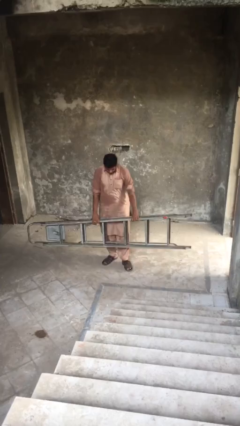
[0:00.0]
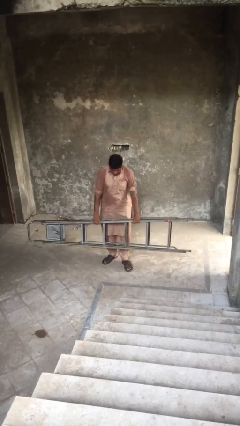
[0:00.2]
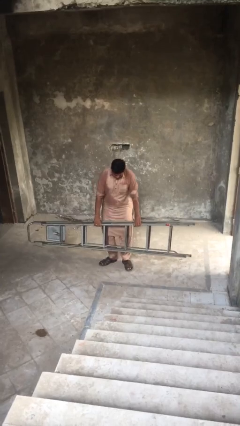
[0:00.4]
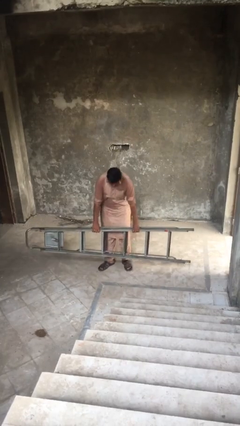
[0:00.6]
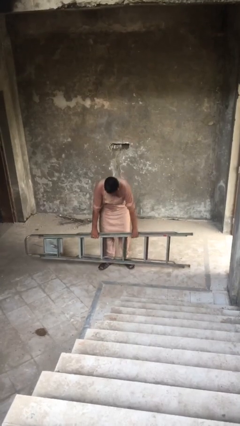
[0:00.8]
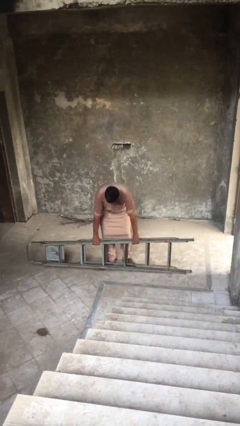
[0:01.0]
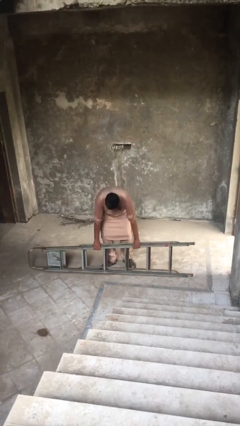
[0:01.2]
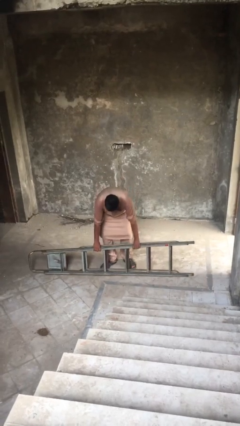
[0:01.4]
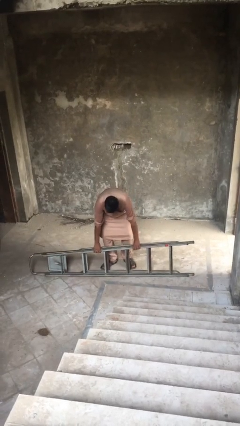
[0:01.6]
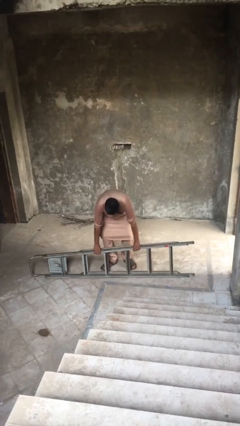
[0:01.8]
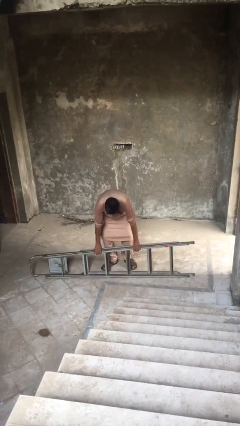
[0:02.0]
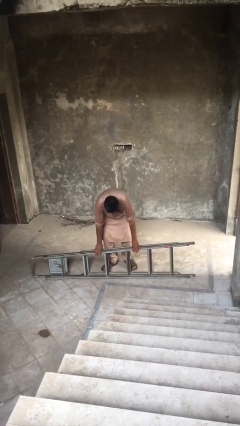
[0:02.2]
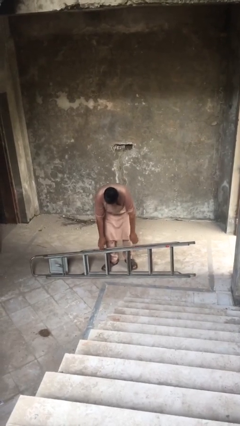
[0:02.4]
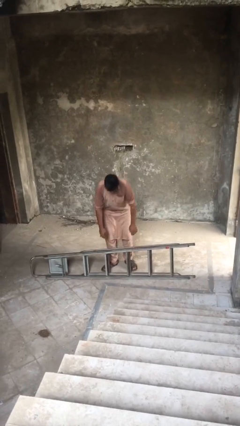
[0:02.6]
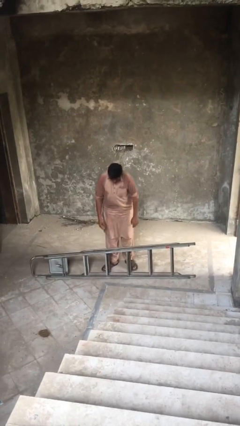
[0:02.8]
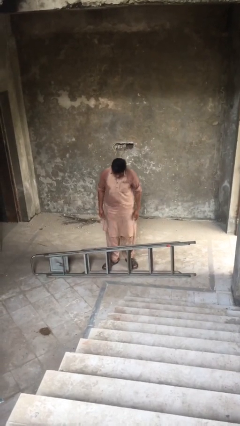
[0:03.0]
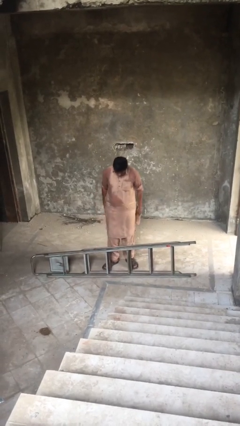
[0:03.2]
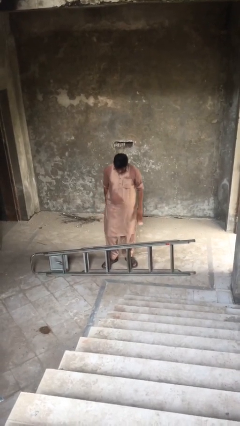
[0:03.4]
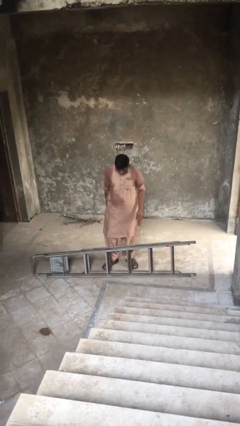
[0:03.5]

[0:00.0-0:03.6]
person puts down object on floor

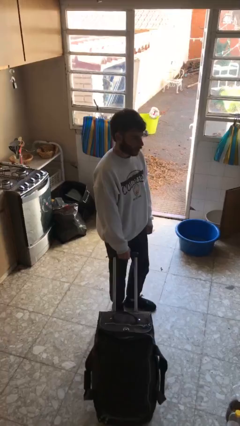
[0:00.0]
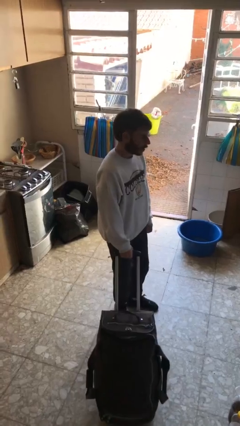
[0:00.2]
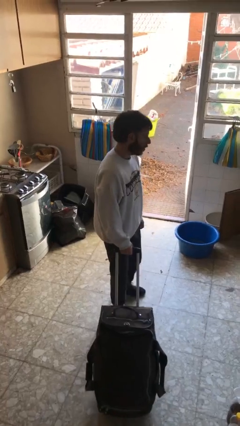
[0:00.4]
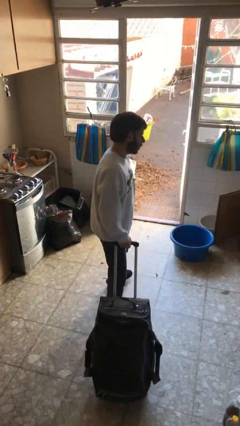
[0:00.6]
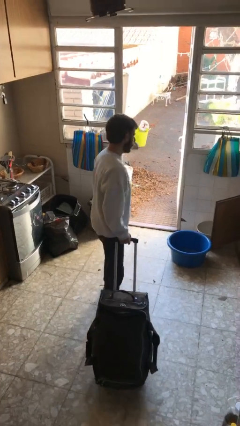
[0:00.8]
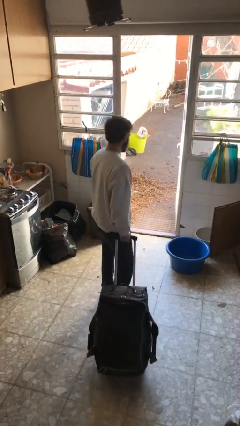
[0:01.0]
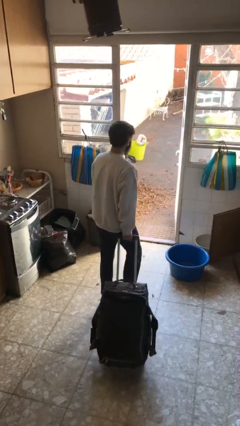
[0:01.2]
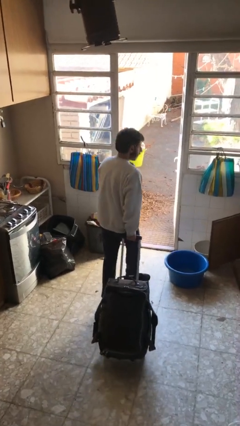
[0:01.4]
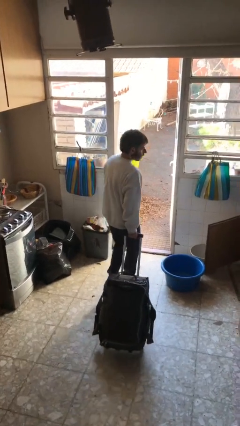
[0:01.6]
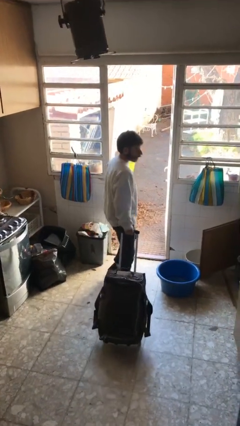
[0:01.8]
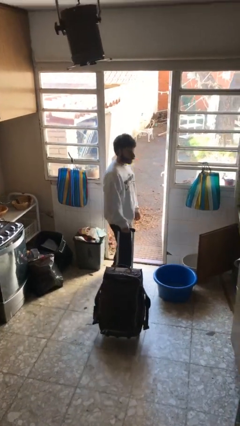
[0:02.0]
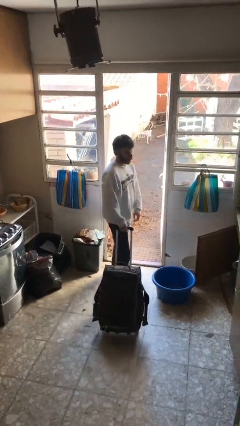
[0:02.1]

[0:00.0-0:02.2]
person pulls wheeled cart

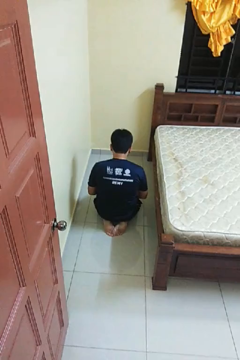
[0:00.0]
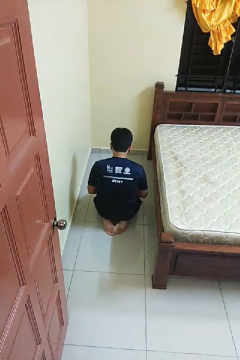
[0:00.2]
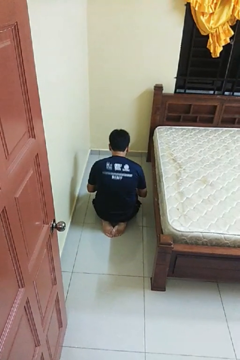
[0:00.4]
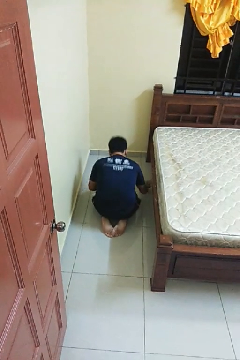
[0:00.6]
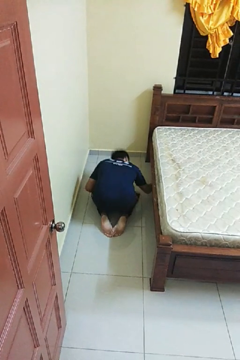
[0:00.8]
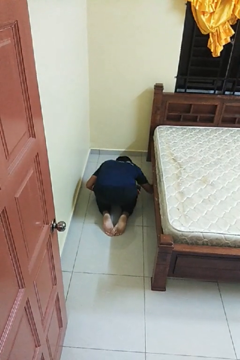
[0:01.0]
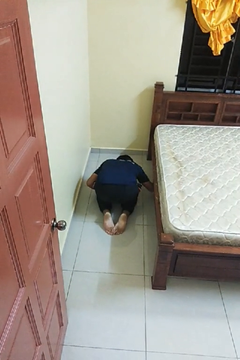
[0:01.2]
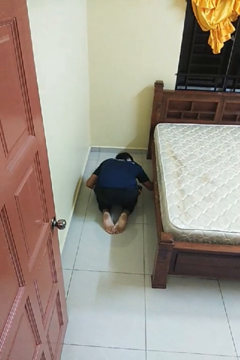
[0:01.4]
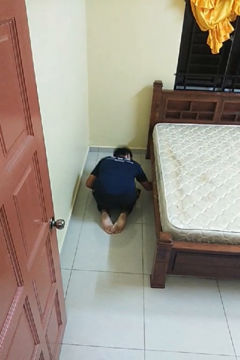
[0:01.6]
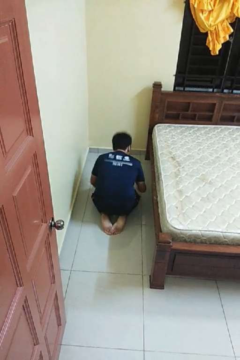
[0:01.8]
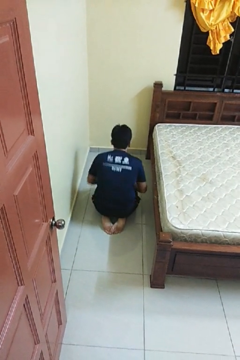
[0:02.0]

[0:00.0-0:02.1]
person searches under bed

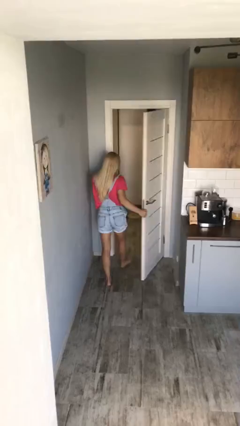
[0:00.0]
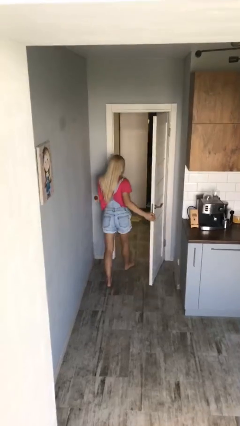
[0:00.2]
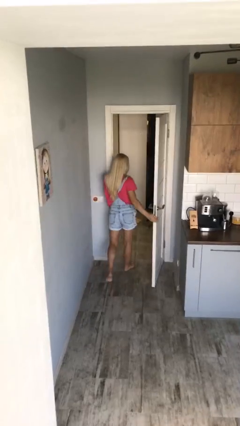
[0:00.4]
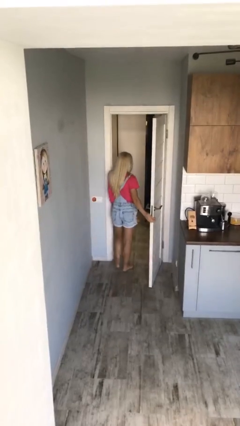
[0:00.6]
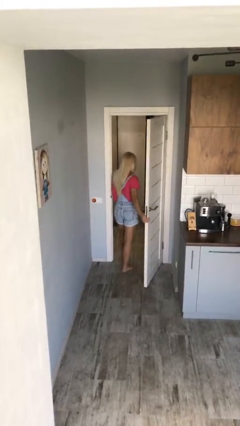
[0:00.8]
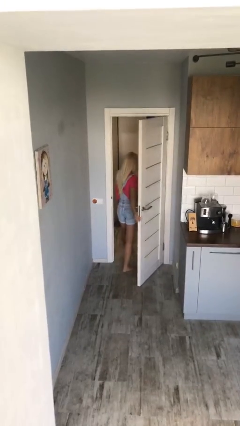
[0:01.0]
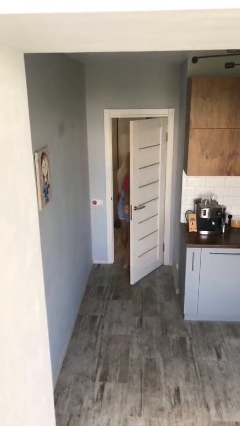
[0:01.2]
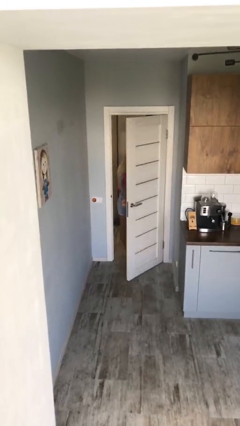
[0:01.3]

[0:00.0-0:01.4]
person enters scene through structure

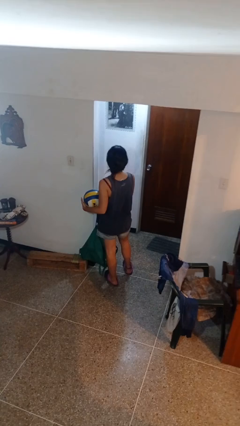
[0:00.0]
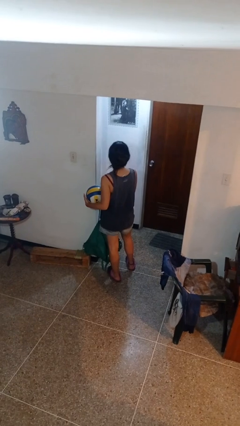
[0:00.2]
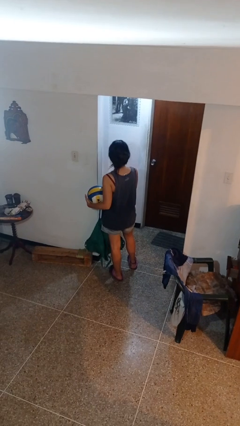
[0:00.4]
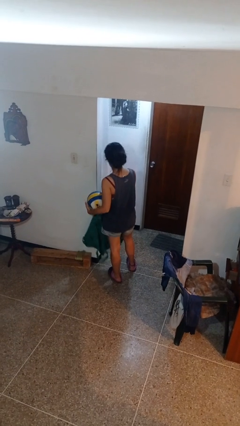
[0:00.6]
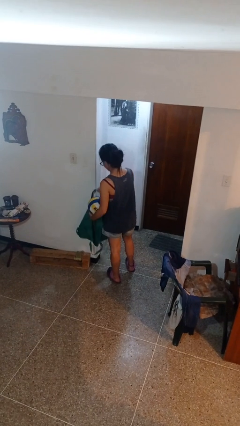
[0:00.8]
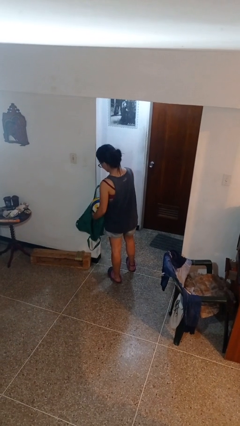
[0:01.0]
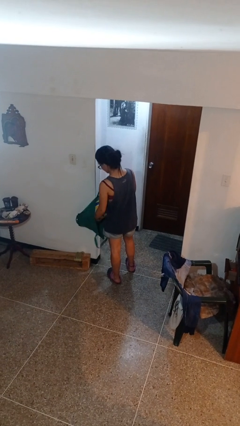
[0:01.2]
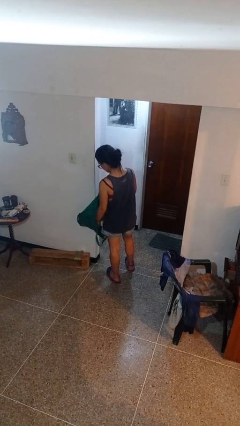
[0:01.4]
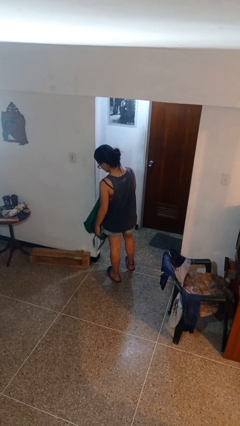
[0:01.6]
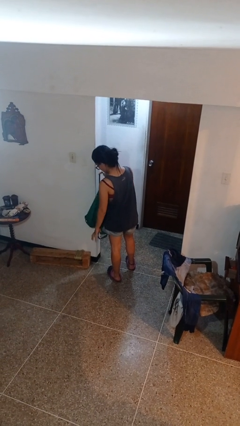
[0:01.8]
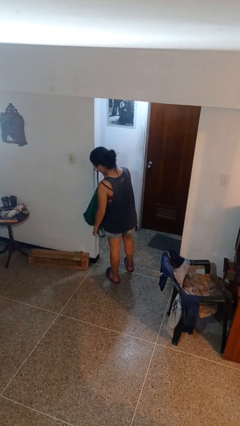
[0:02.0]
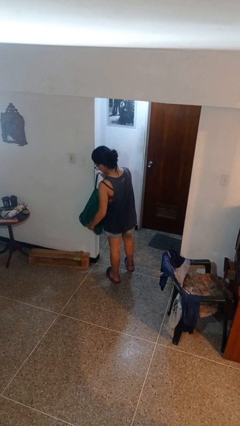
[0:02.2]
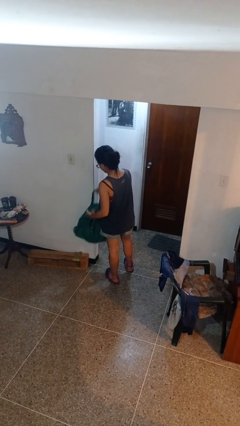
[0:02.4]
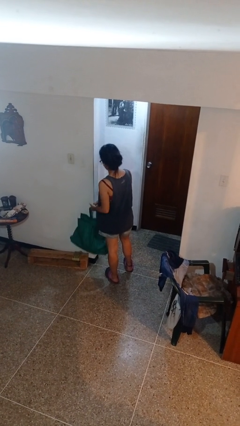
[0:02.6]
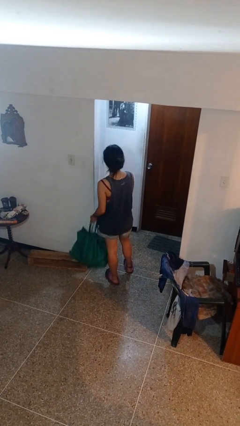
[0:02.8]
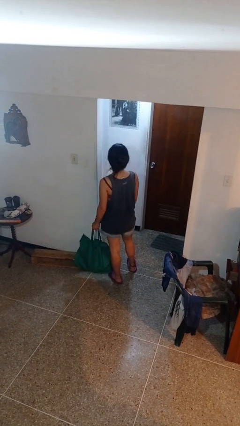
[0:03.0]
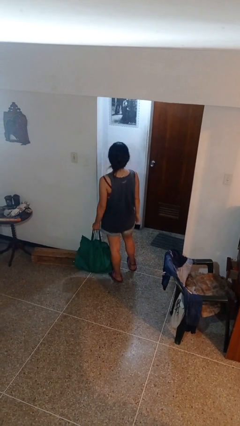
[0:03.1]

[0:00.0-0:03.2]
person puts object into bag

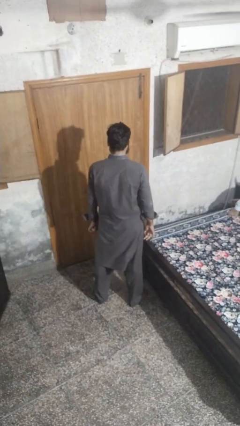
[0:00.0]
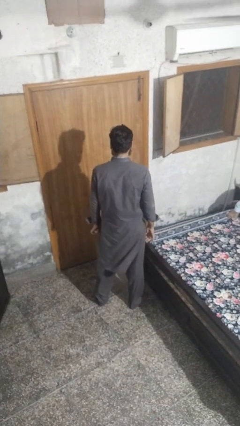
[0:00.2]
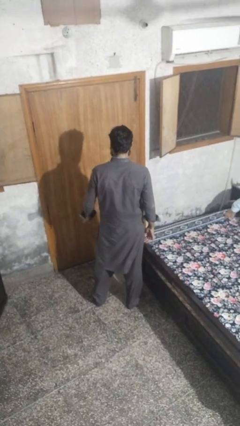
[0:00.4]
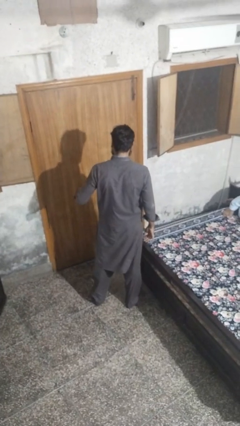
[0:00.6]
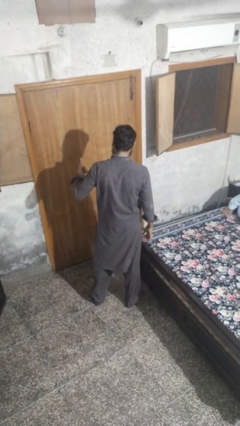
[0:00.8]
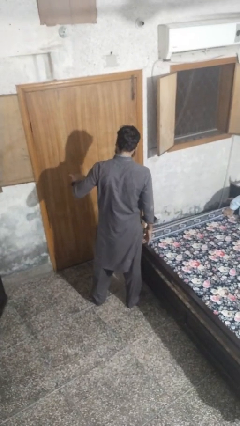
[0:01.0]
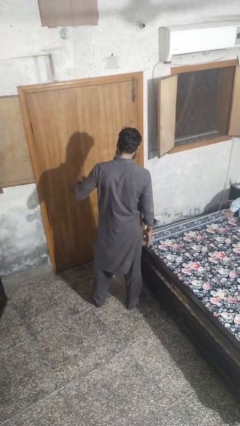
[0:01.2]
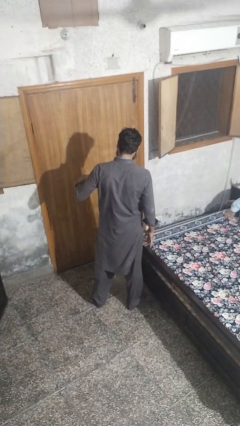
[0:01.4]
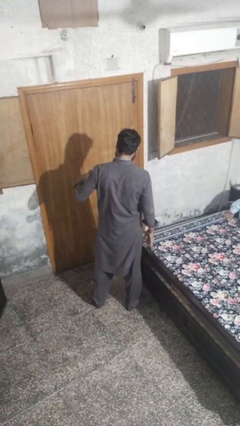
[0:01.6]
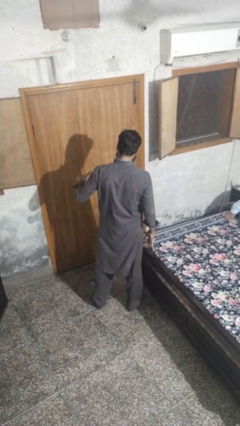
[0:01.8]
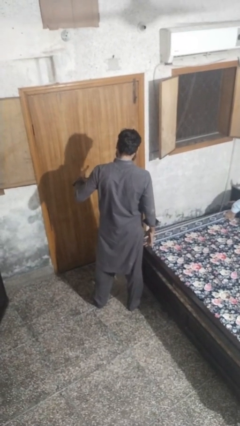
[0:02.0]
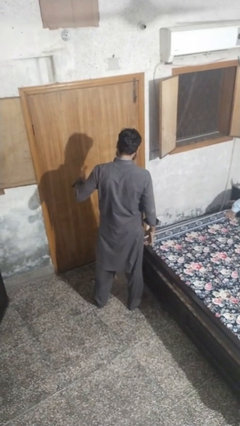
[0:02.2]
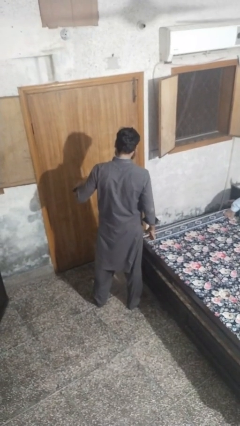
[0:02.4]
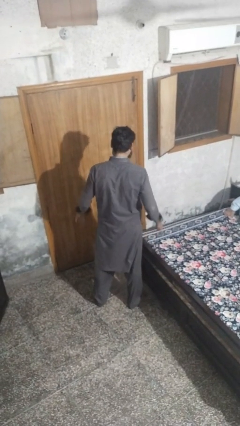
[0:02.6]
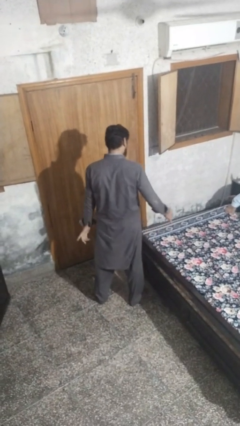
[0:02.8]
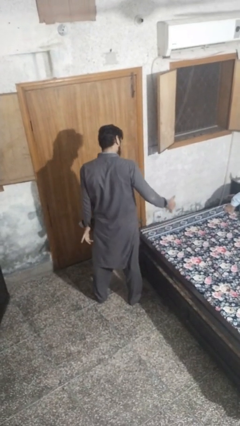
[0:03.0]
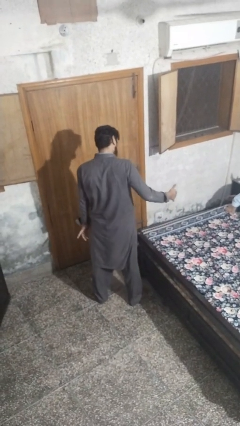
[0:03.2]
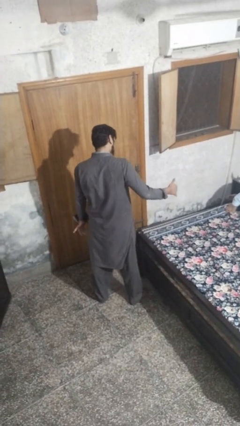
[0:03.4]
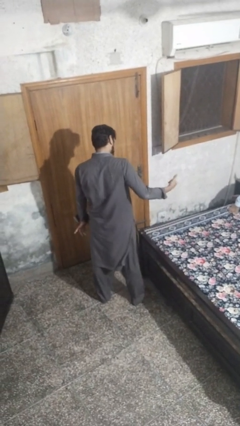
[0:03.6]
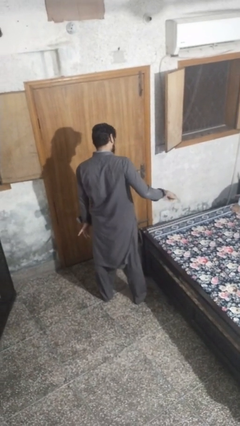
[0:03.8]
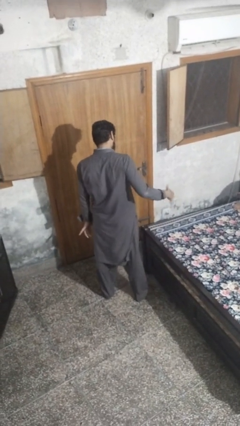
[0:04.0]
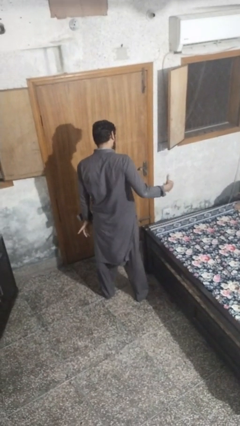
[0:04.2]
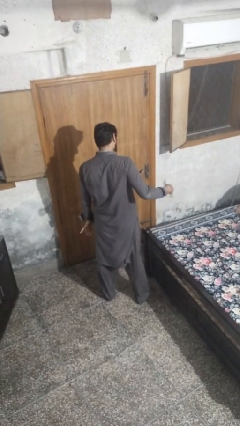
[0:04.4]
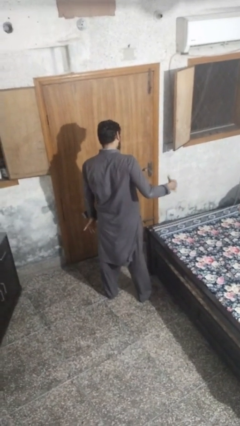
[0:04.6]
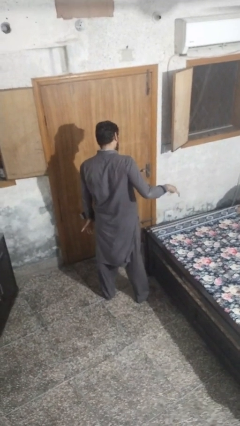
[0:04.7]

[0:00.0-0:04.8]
person gestures hang loose

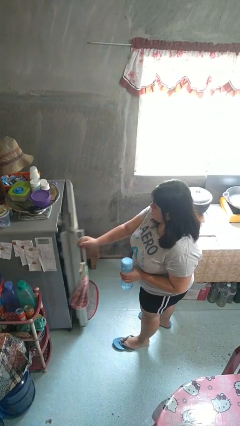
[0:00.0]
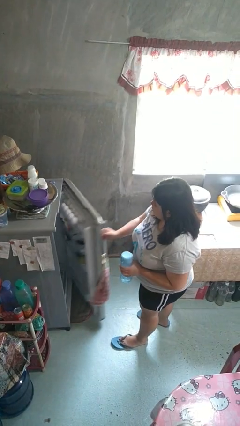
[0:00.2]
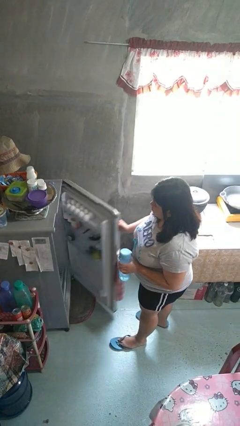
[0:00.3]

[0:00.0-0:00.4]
person opens refrigerator
